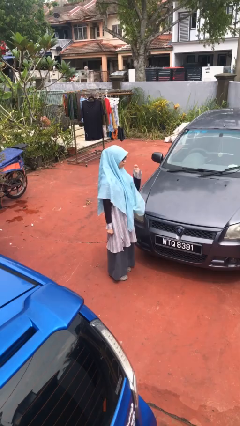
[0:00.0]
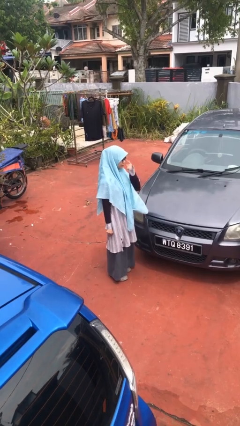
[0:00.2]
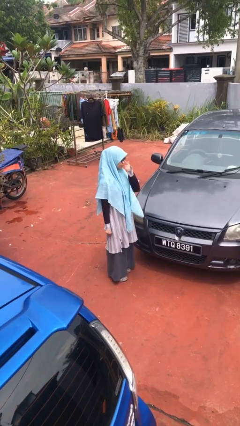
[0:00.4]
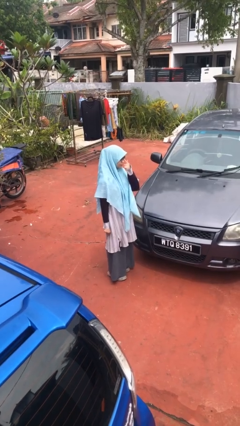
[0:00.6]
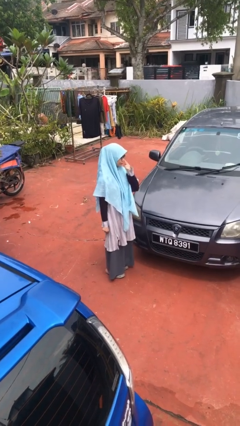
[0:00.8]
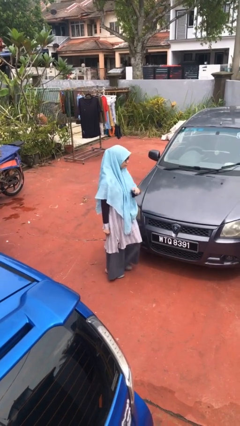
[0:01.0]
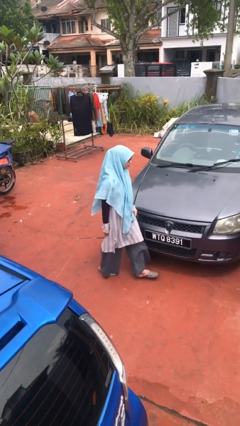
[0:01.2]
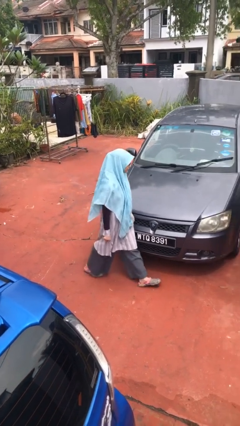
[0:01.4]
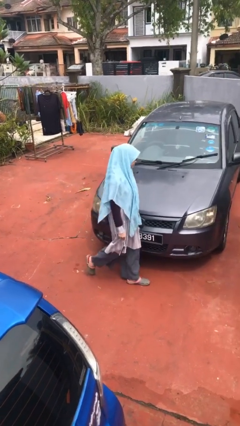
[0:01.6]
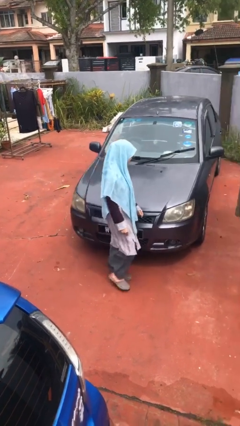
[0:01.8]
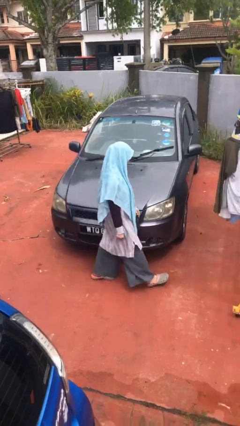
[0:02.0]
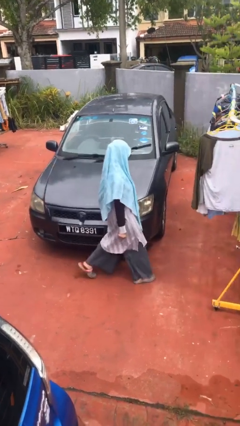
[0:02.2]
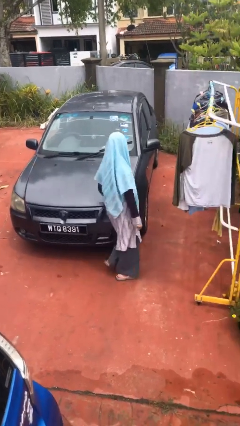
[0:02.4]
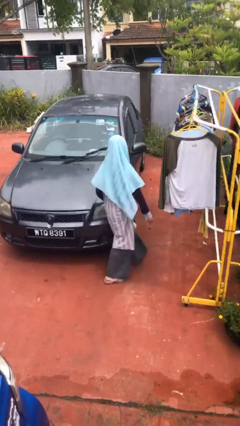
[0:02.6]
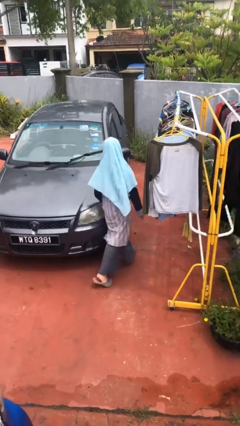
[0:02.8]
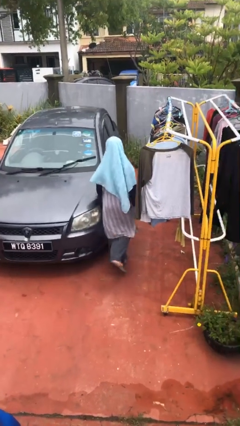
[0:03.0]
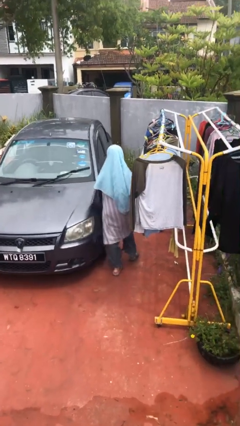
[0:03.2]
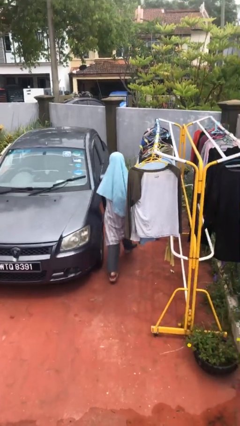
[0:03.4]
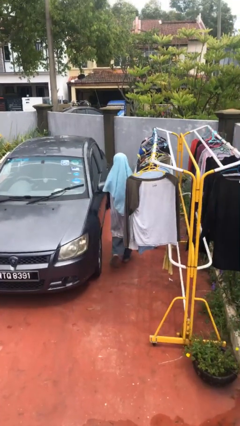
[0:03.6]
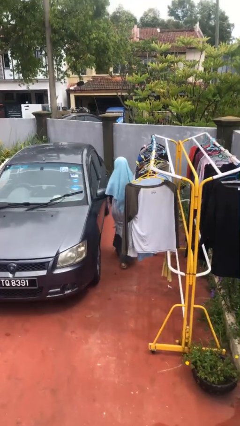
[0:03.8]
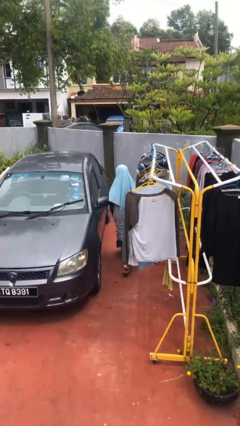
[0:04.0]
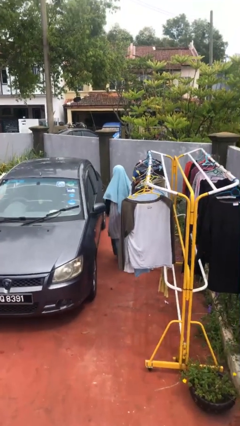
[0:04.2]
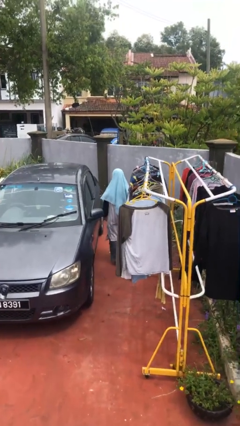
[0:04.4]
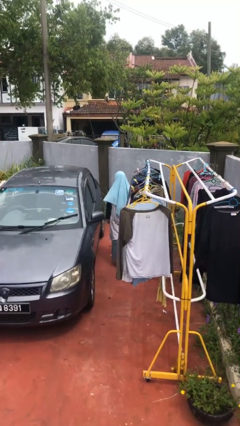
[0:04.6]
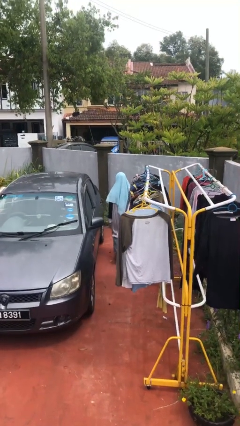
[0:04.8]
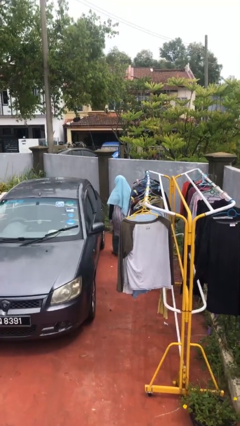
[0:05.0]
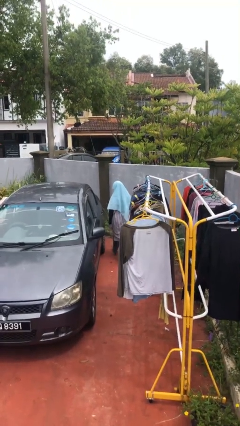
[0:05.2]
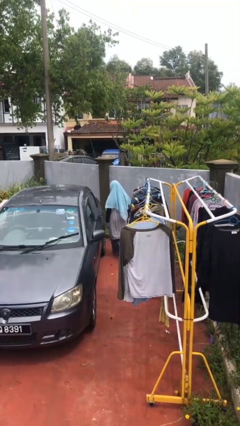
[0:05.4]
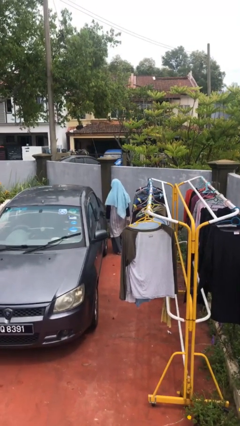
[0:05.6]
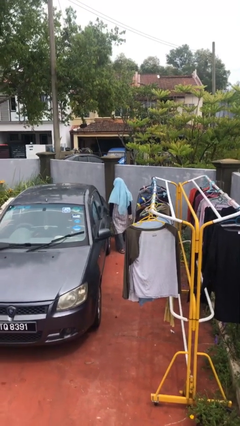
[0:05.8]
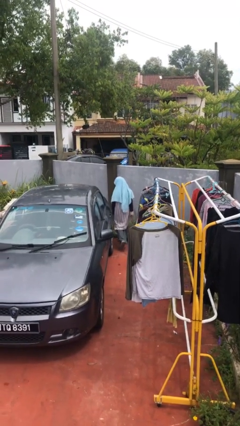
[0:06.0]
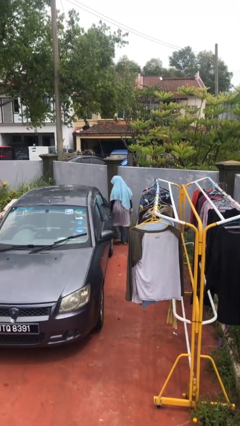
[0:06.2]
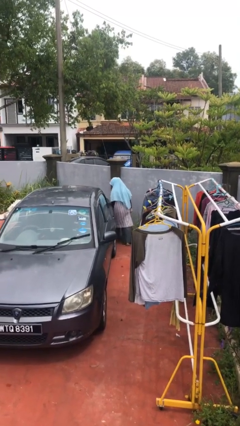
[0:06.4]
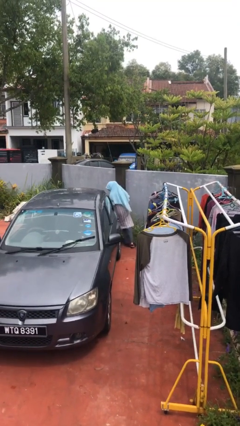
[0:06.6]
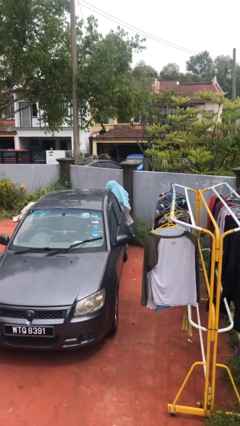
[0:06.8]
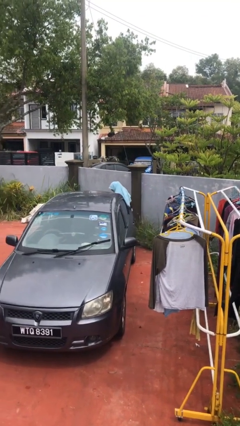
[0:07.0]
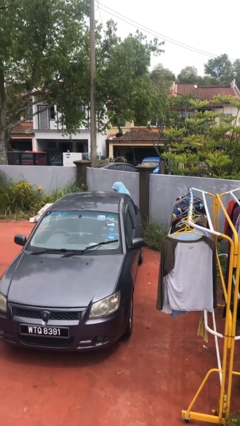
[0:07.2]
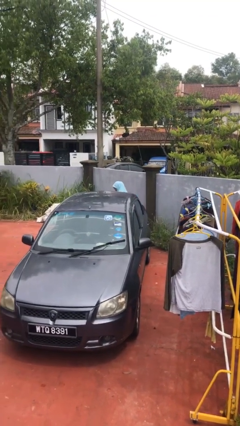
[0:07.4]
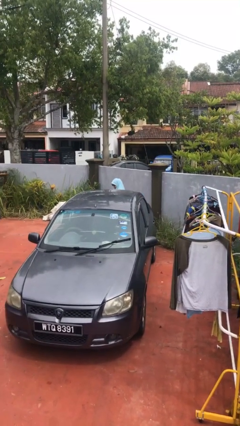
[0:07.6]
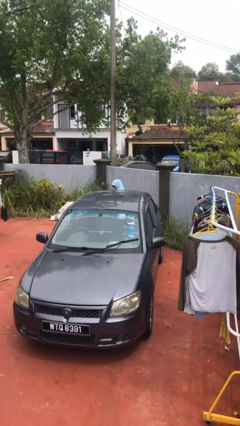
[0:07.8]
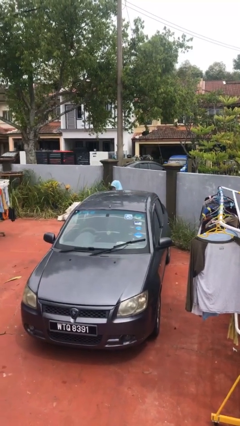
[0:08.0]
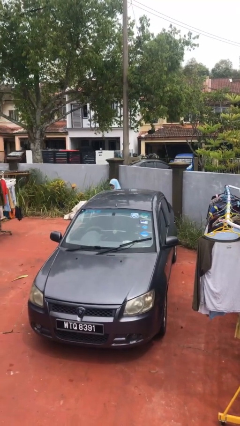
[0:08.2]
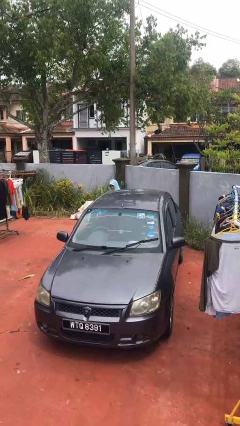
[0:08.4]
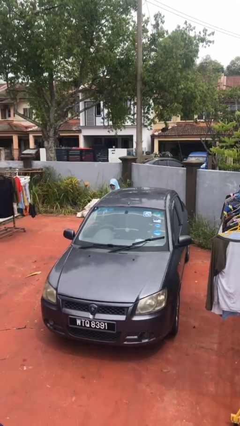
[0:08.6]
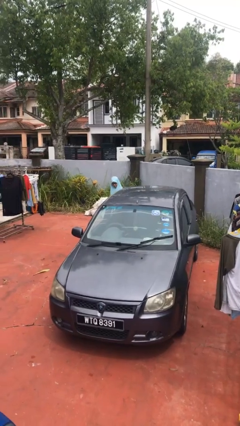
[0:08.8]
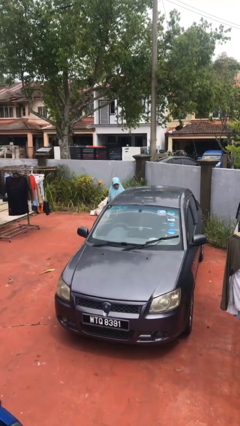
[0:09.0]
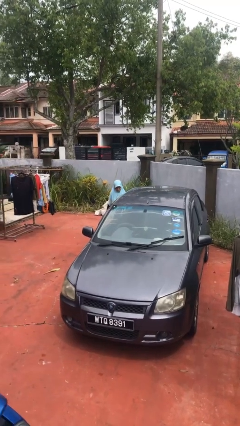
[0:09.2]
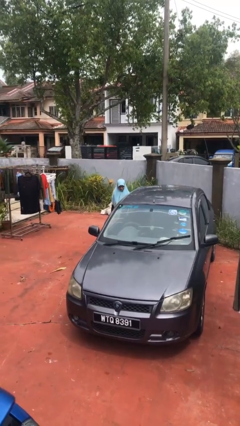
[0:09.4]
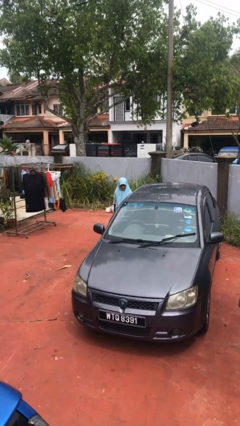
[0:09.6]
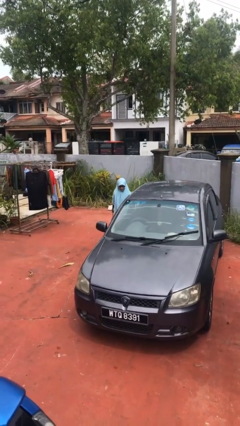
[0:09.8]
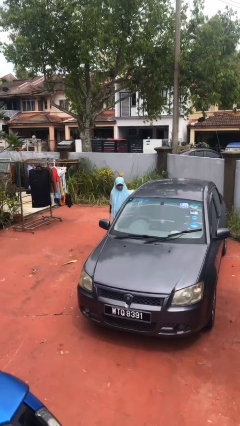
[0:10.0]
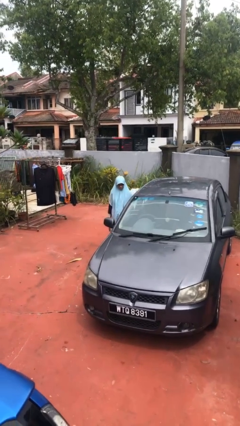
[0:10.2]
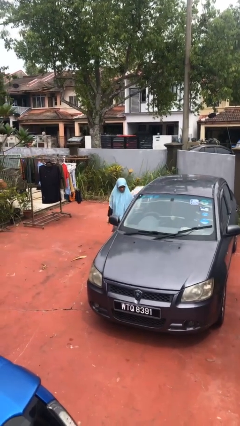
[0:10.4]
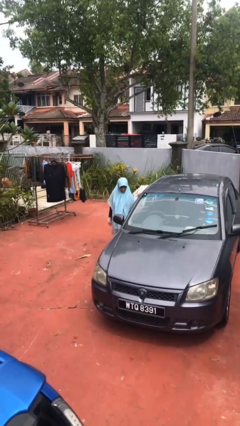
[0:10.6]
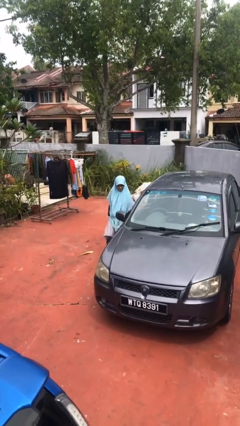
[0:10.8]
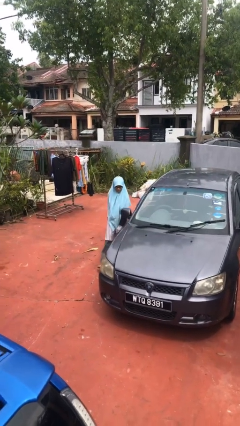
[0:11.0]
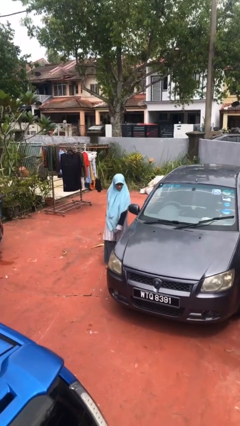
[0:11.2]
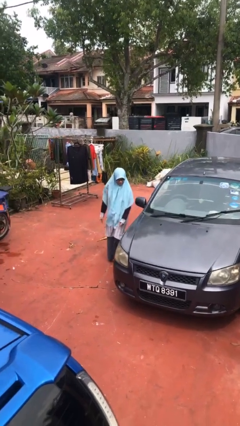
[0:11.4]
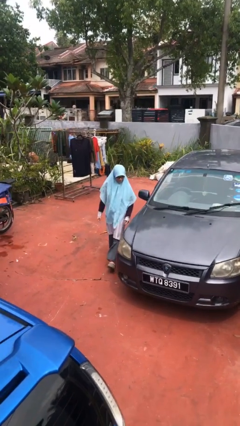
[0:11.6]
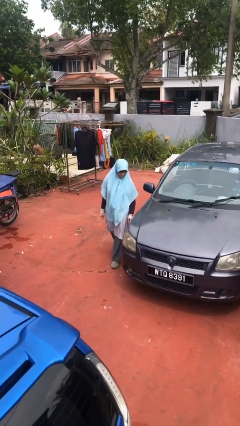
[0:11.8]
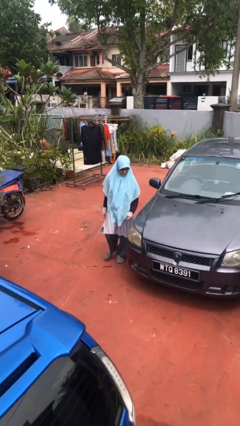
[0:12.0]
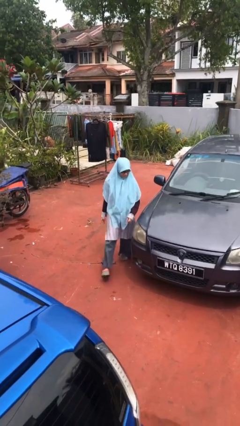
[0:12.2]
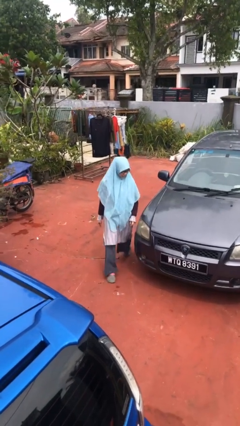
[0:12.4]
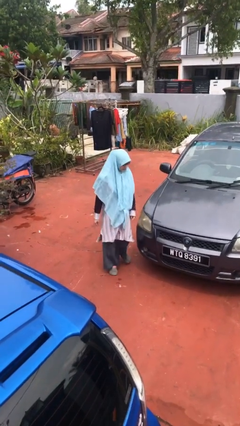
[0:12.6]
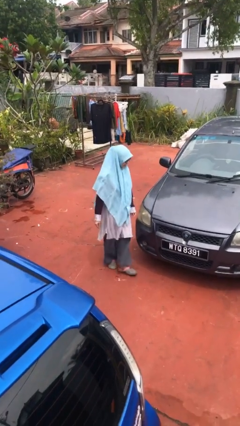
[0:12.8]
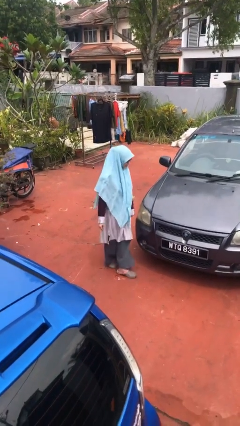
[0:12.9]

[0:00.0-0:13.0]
person walks around car

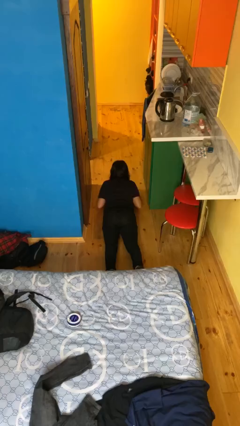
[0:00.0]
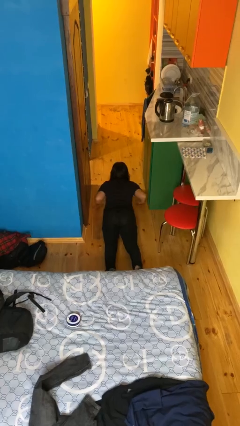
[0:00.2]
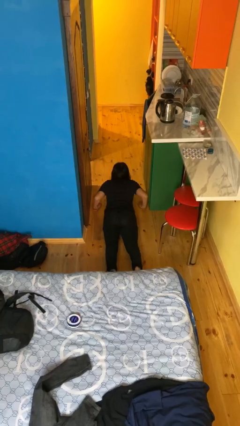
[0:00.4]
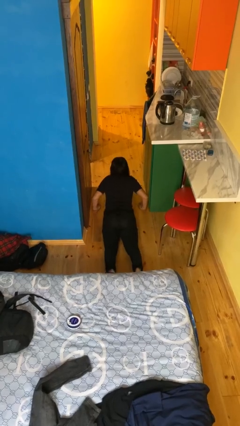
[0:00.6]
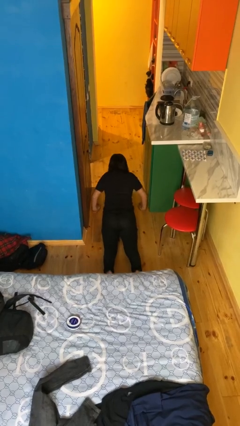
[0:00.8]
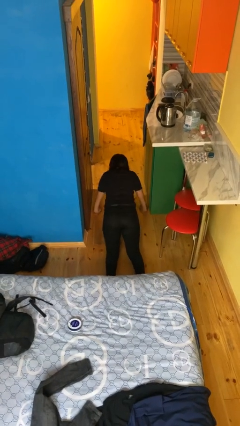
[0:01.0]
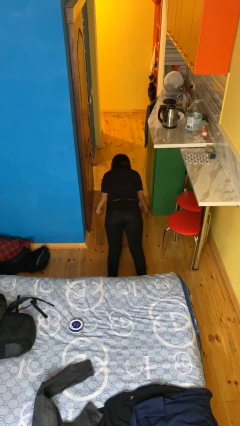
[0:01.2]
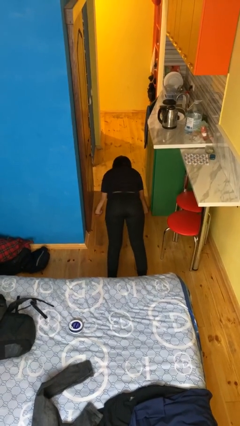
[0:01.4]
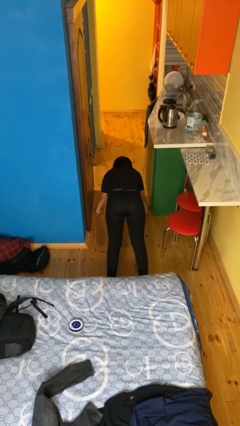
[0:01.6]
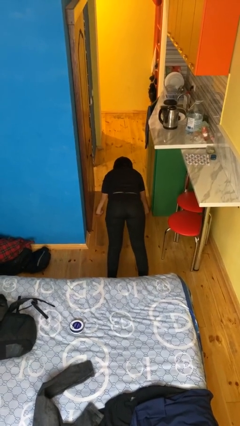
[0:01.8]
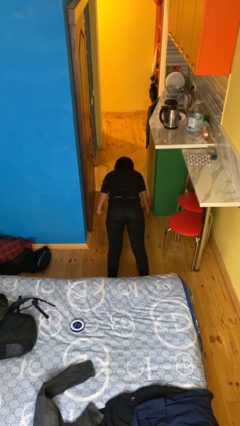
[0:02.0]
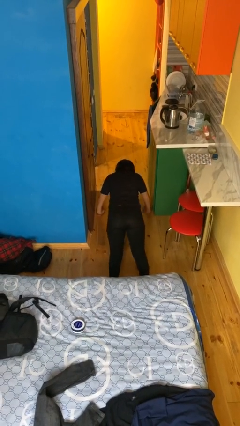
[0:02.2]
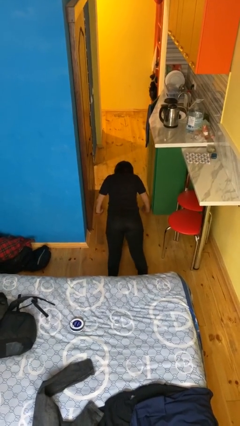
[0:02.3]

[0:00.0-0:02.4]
person exercises with pushup

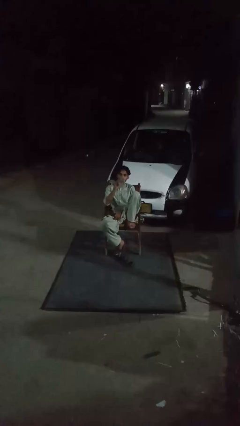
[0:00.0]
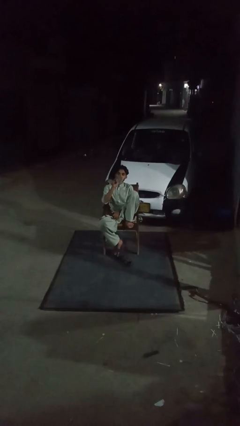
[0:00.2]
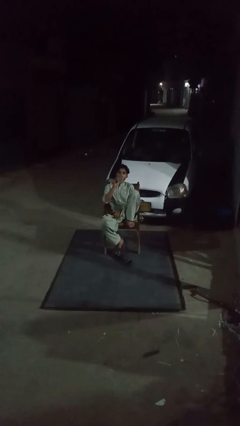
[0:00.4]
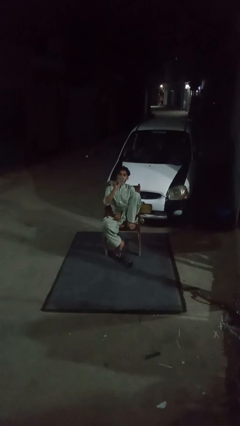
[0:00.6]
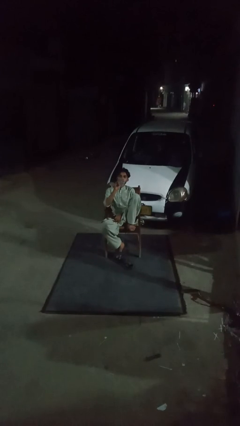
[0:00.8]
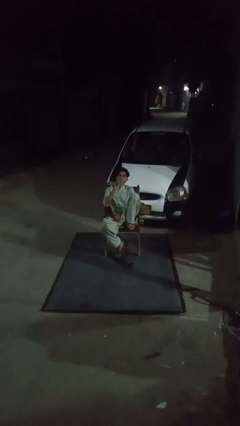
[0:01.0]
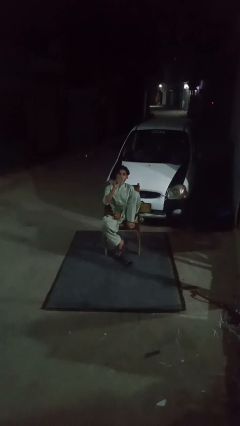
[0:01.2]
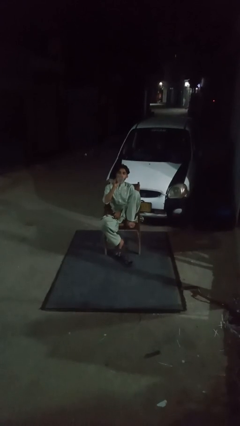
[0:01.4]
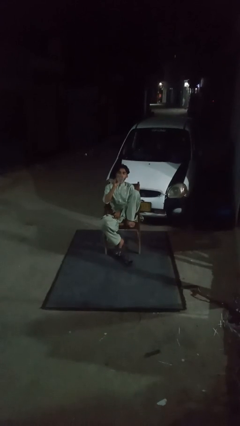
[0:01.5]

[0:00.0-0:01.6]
person drinks from bottle

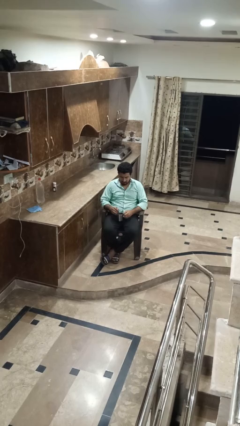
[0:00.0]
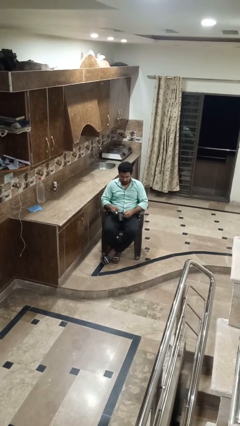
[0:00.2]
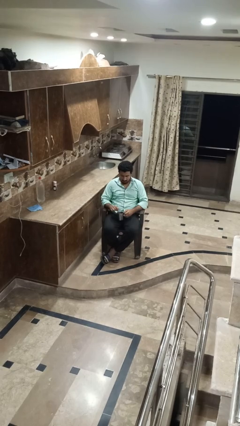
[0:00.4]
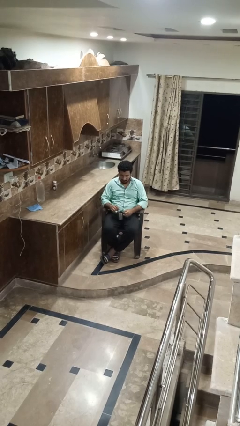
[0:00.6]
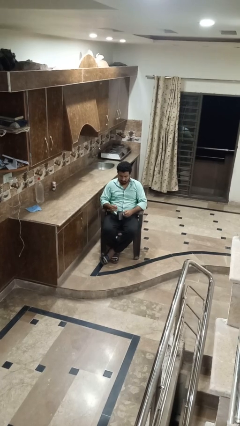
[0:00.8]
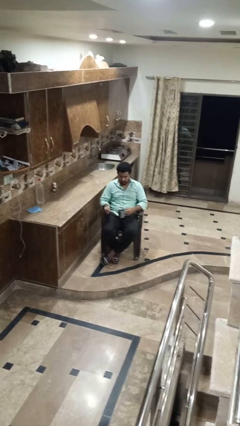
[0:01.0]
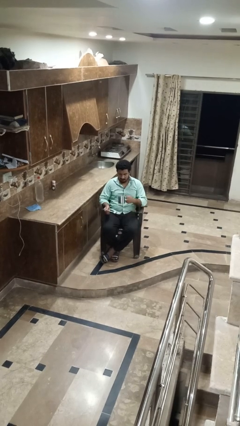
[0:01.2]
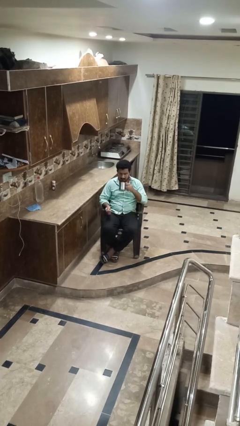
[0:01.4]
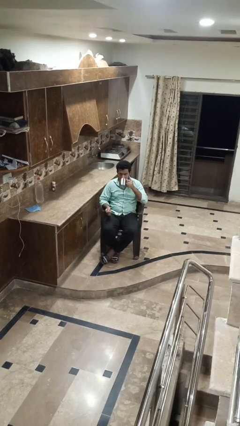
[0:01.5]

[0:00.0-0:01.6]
person stirs mug
